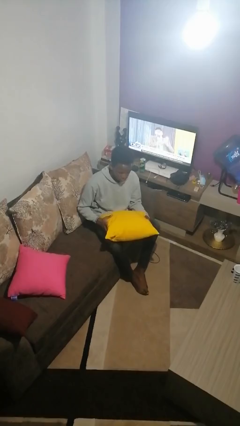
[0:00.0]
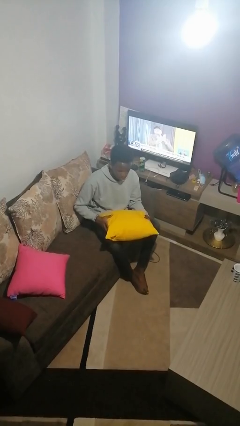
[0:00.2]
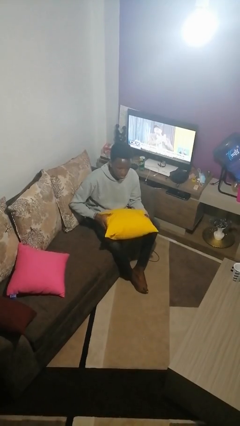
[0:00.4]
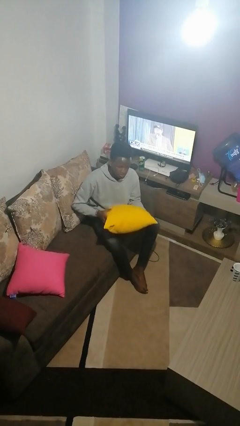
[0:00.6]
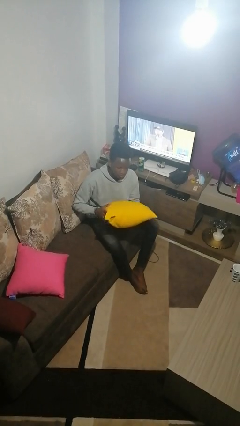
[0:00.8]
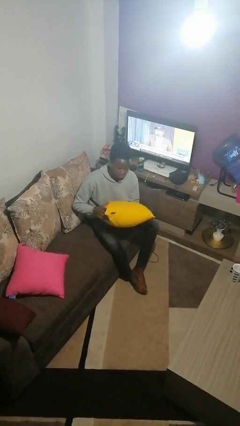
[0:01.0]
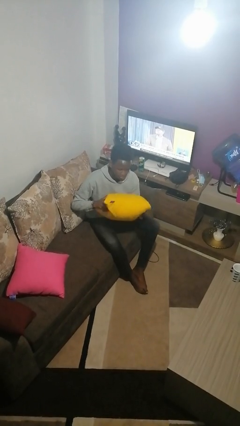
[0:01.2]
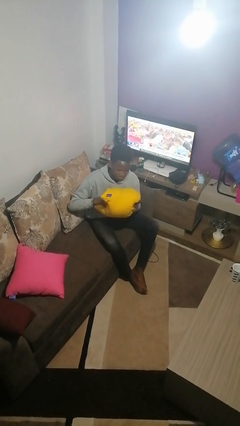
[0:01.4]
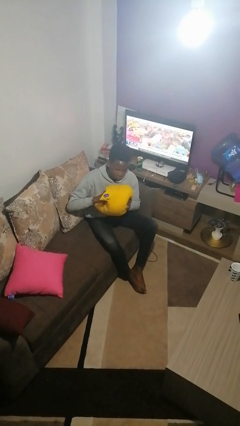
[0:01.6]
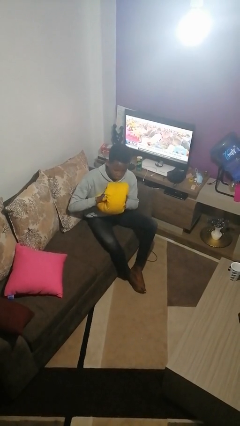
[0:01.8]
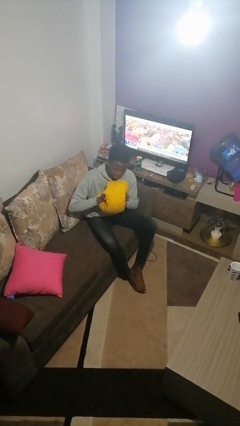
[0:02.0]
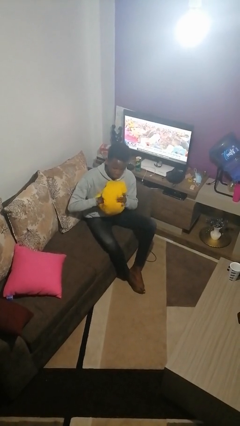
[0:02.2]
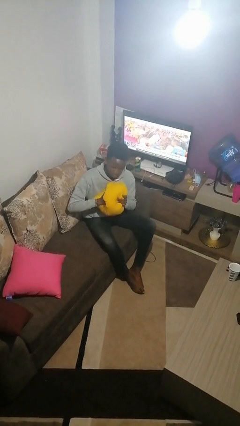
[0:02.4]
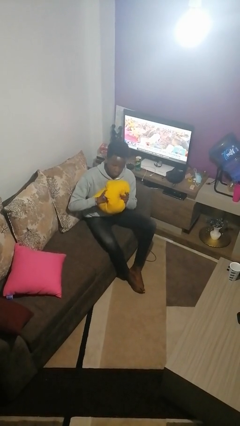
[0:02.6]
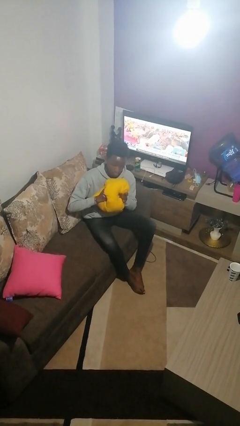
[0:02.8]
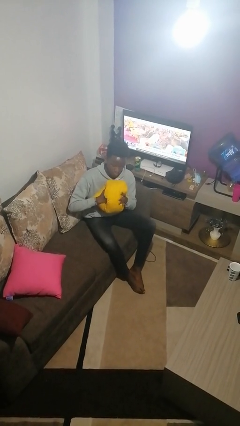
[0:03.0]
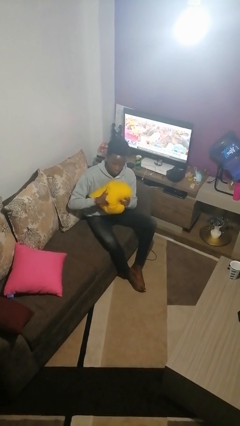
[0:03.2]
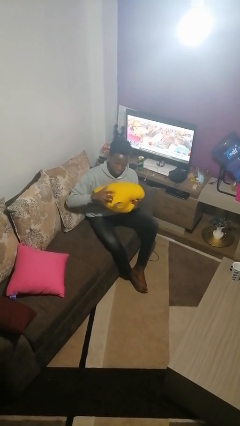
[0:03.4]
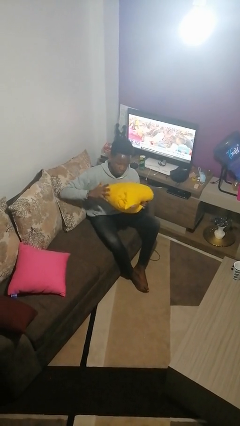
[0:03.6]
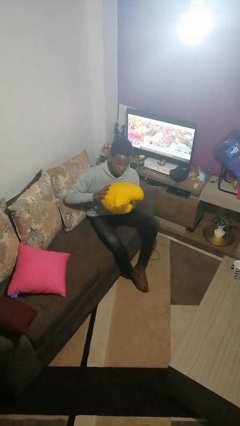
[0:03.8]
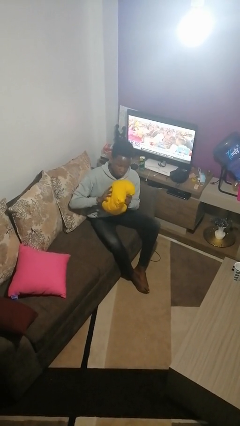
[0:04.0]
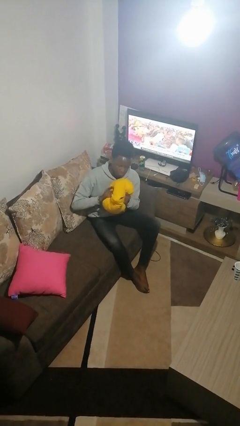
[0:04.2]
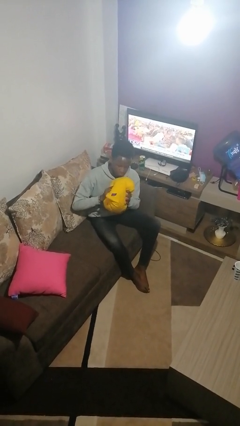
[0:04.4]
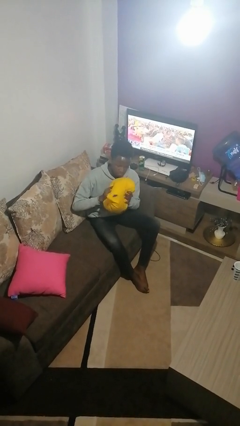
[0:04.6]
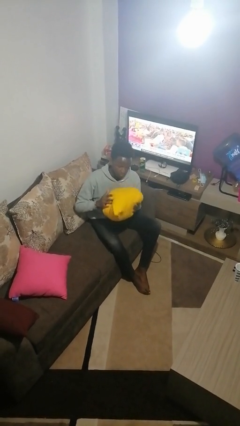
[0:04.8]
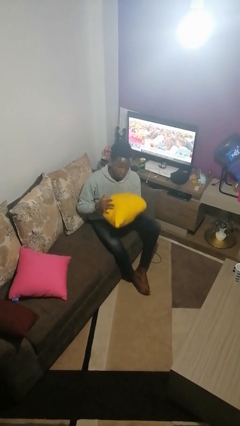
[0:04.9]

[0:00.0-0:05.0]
person squeezes object

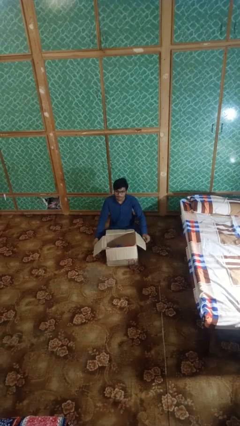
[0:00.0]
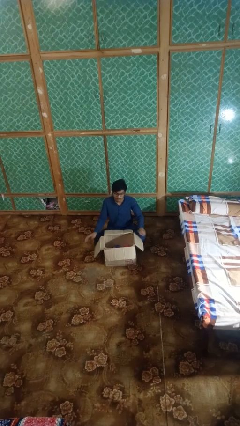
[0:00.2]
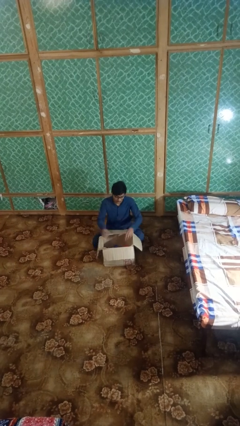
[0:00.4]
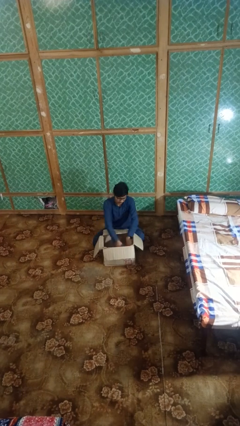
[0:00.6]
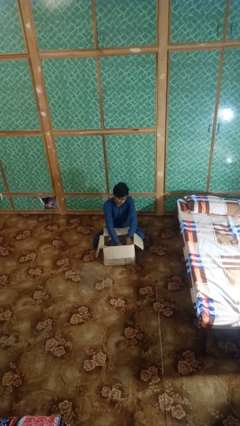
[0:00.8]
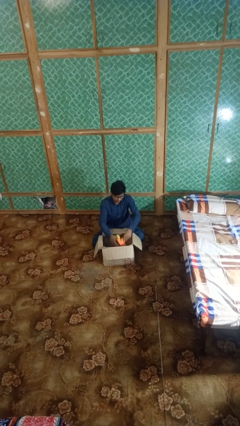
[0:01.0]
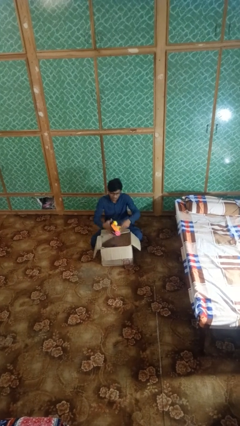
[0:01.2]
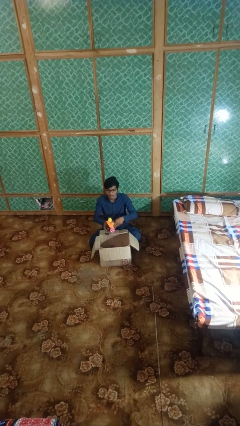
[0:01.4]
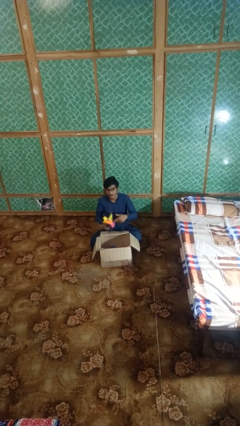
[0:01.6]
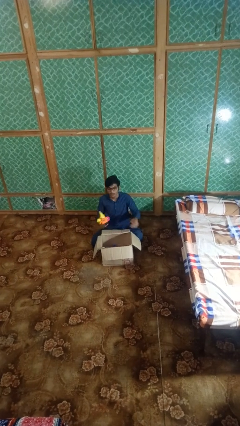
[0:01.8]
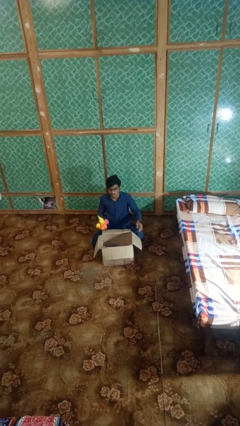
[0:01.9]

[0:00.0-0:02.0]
person takes object from box

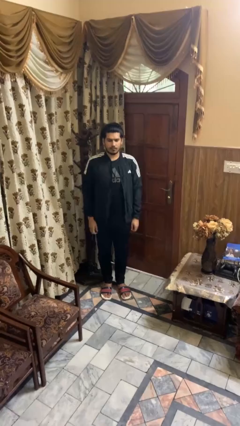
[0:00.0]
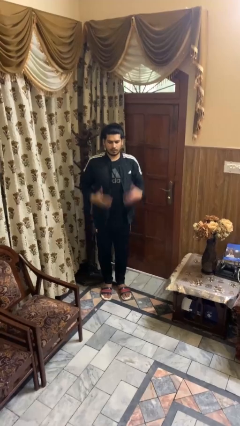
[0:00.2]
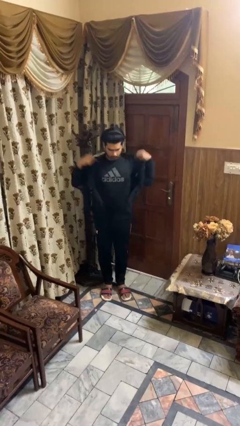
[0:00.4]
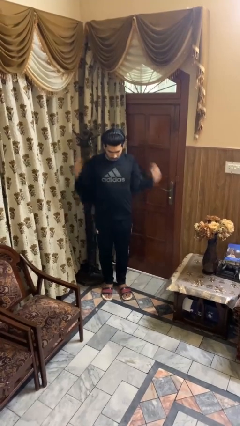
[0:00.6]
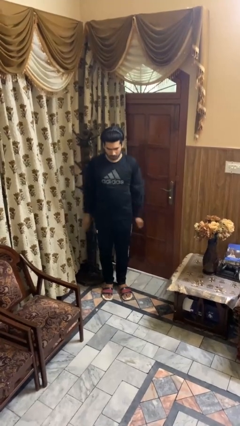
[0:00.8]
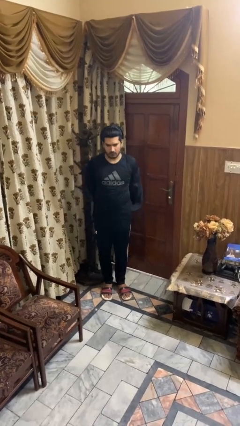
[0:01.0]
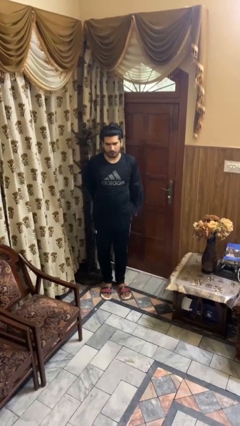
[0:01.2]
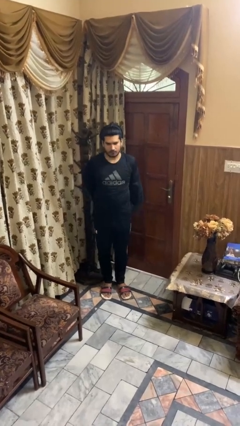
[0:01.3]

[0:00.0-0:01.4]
person takes off jacket

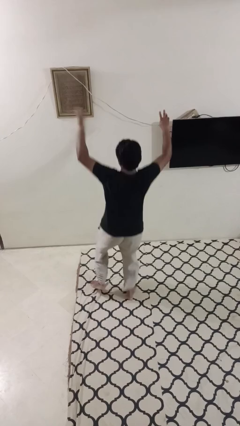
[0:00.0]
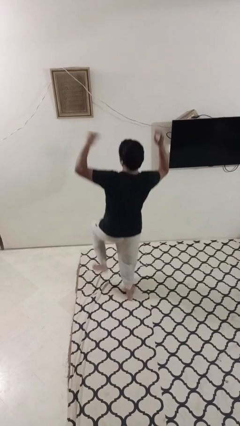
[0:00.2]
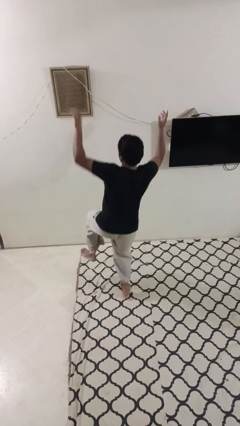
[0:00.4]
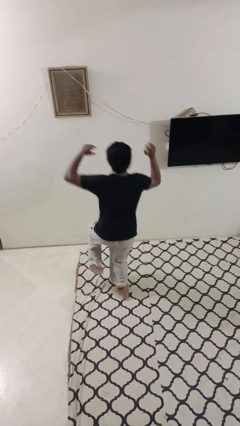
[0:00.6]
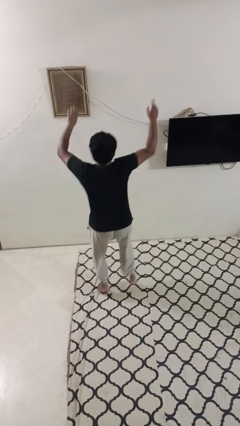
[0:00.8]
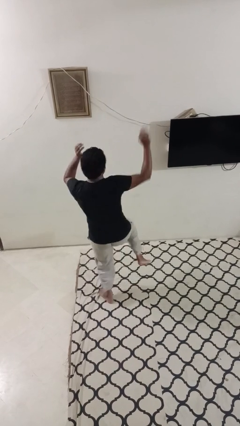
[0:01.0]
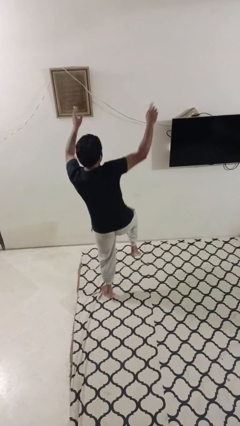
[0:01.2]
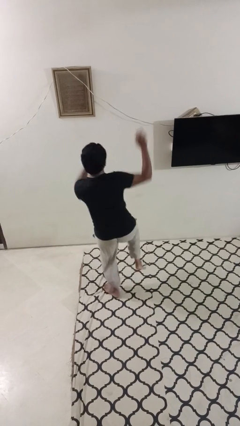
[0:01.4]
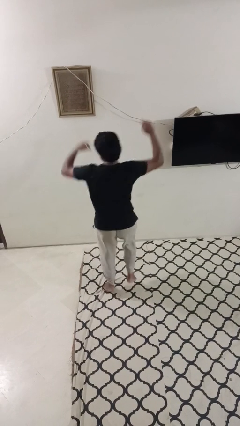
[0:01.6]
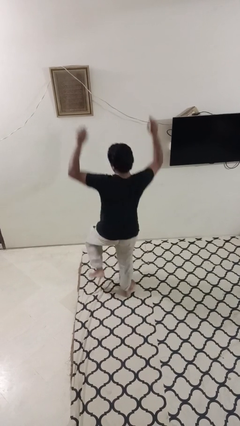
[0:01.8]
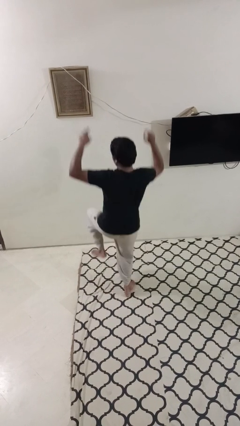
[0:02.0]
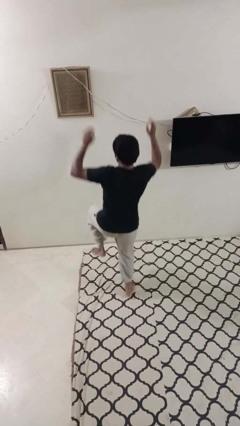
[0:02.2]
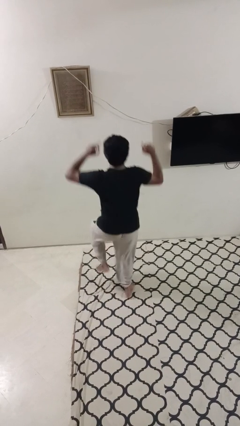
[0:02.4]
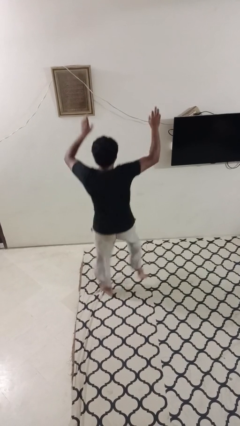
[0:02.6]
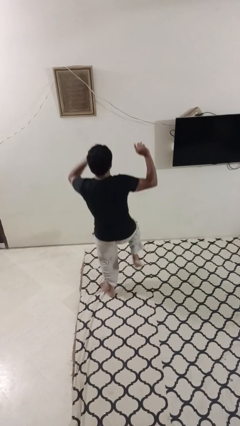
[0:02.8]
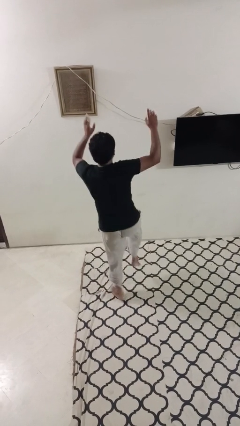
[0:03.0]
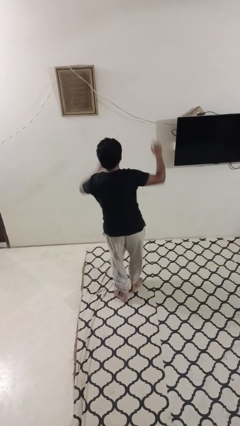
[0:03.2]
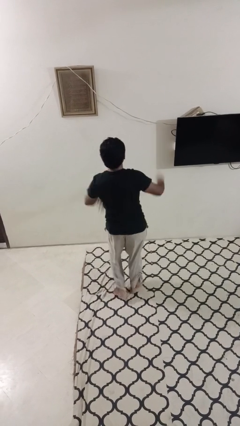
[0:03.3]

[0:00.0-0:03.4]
person dances in place

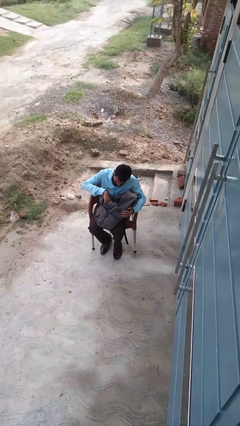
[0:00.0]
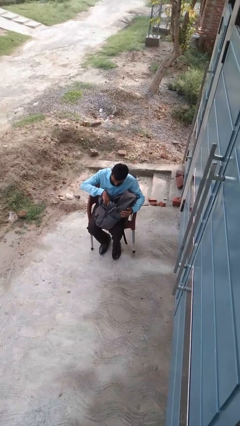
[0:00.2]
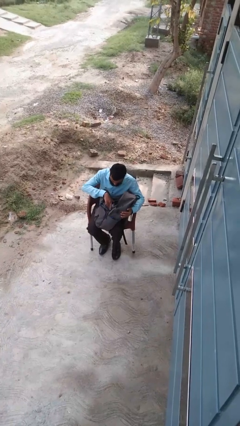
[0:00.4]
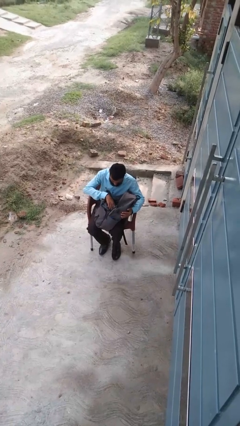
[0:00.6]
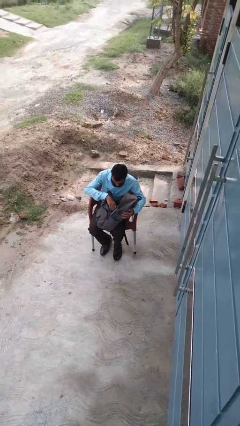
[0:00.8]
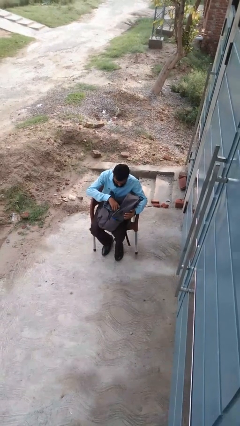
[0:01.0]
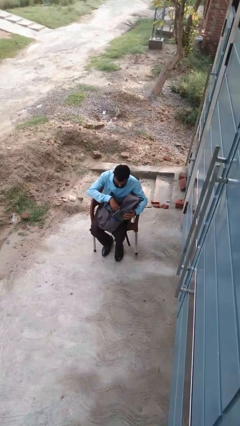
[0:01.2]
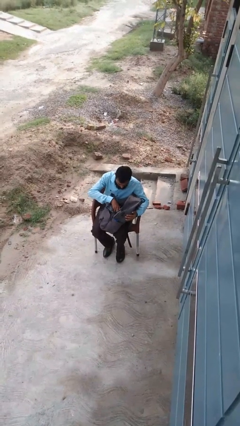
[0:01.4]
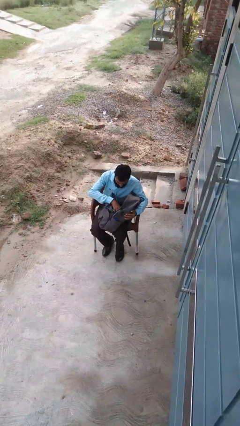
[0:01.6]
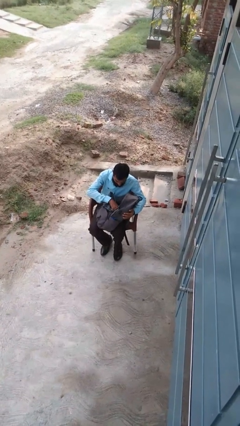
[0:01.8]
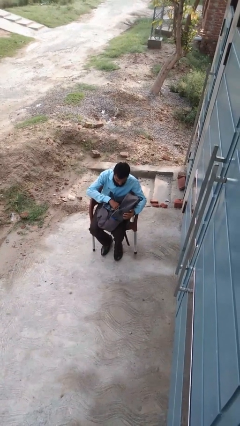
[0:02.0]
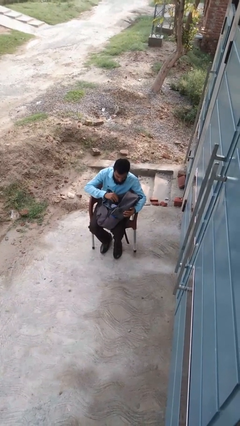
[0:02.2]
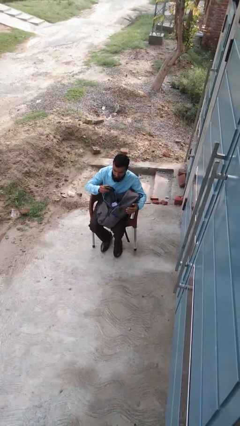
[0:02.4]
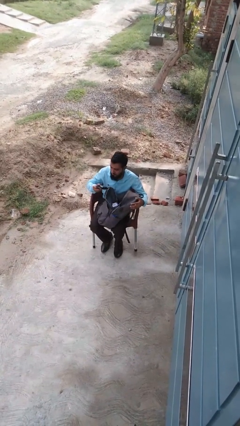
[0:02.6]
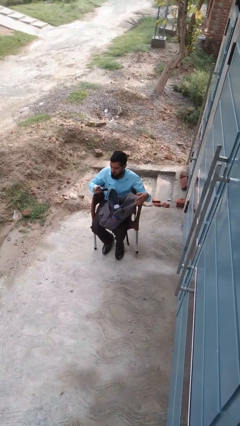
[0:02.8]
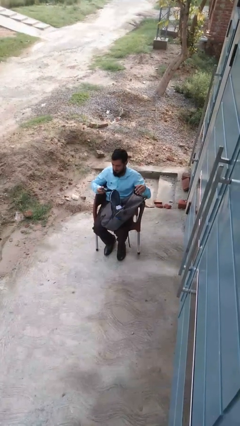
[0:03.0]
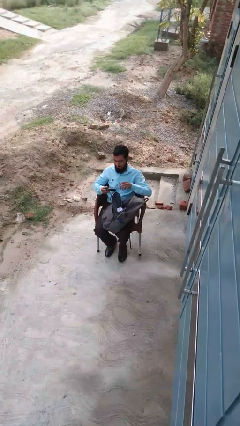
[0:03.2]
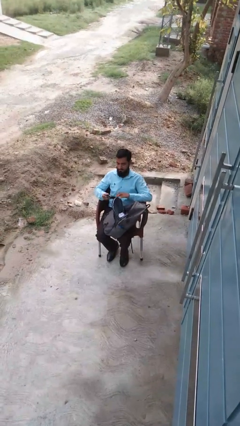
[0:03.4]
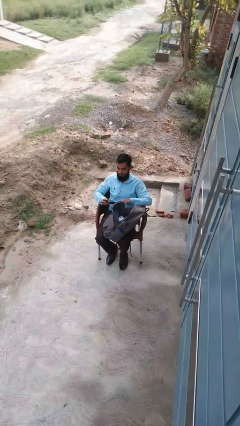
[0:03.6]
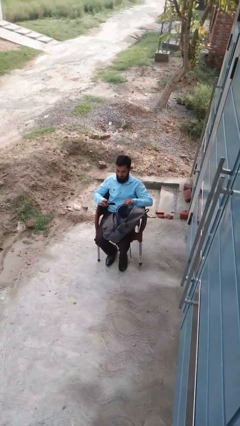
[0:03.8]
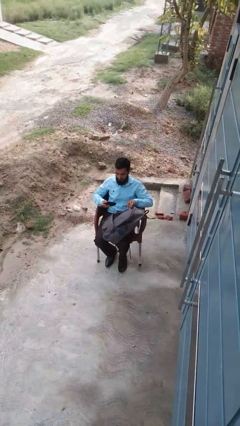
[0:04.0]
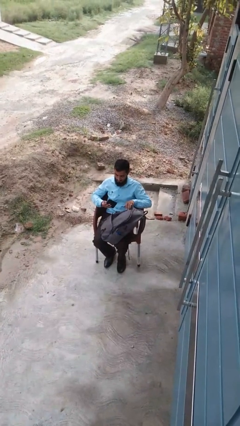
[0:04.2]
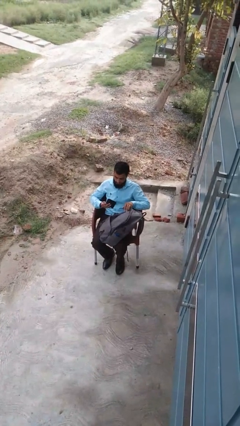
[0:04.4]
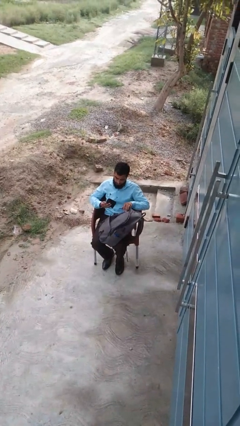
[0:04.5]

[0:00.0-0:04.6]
person takes object from backpack

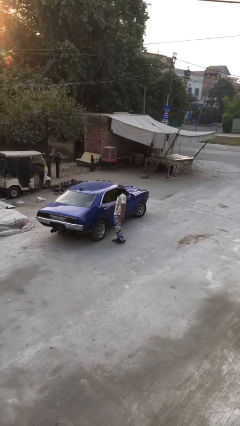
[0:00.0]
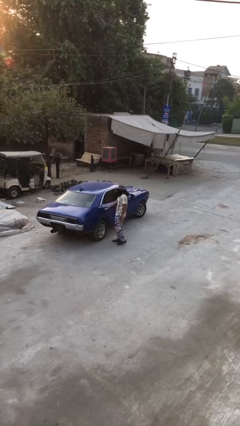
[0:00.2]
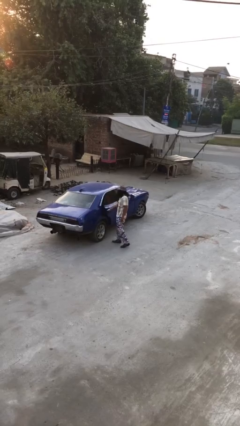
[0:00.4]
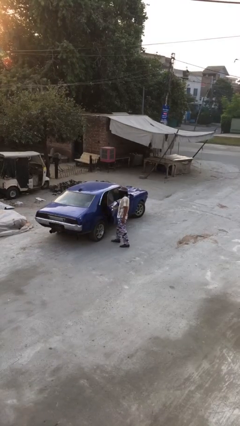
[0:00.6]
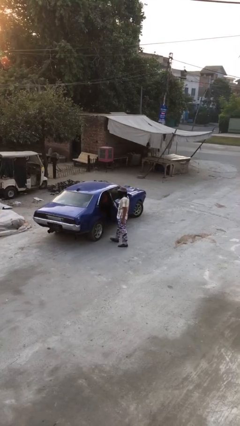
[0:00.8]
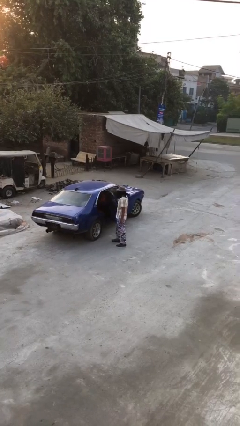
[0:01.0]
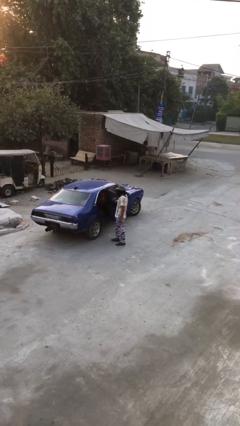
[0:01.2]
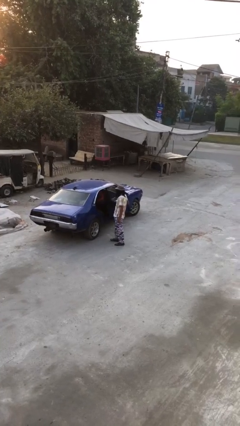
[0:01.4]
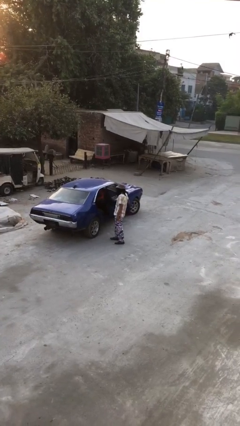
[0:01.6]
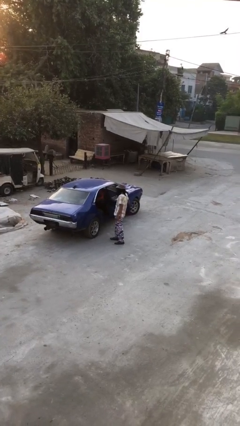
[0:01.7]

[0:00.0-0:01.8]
person opens car door
